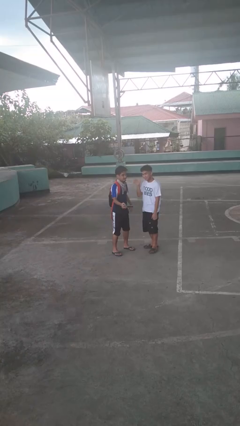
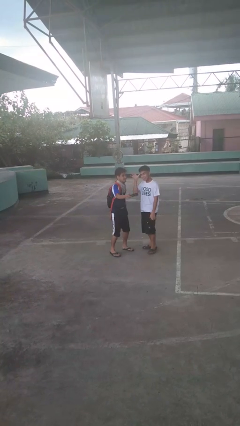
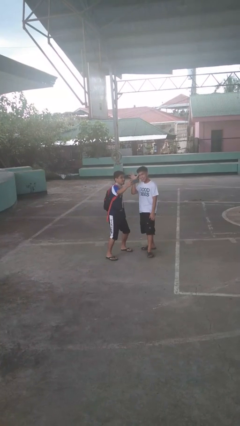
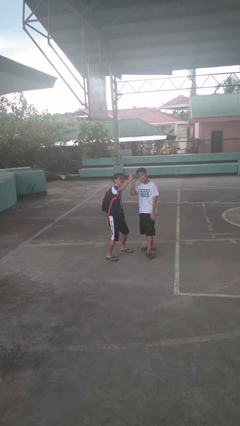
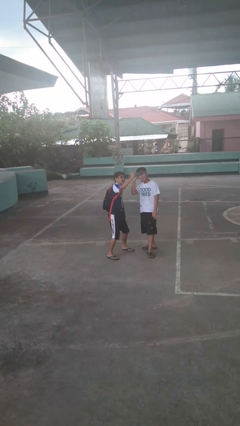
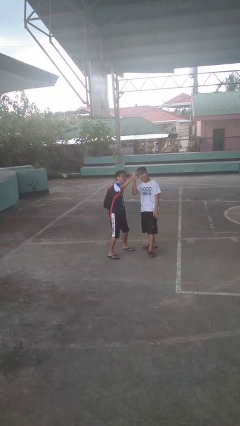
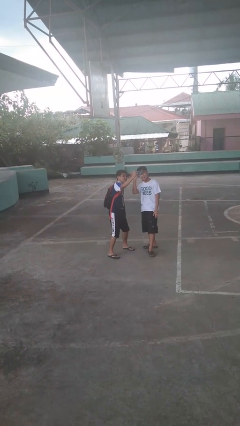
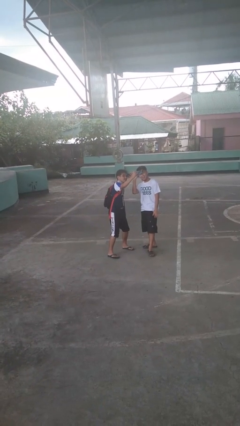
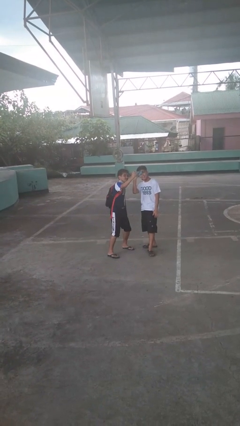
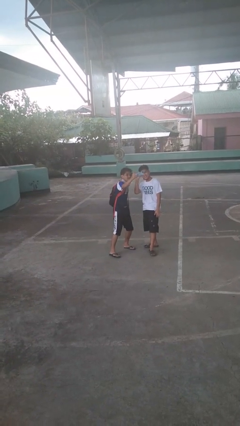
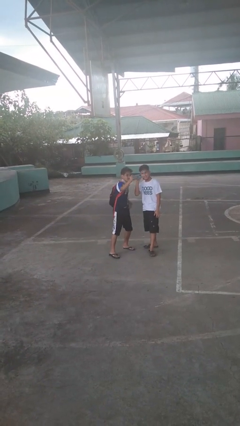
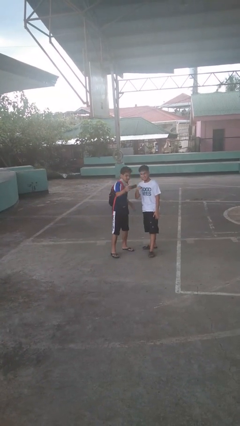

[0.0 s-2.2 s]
person takes selfie with person

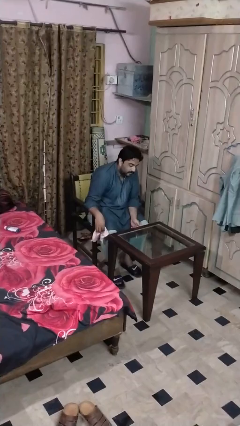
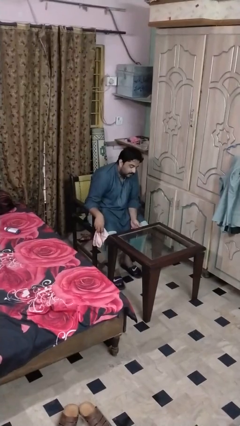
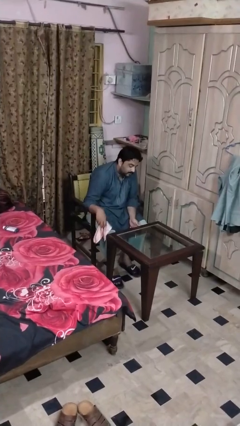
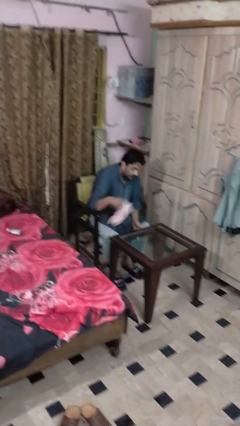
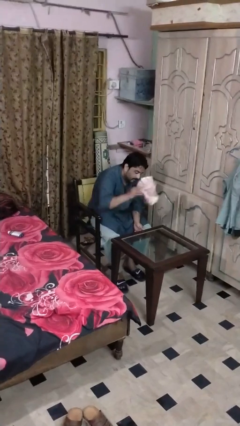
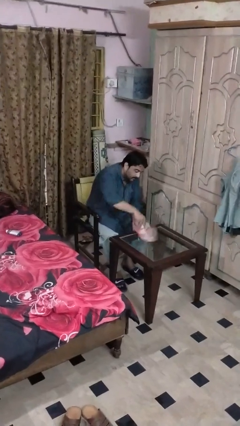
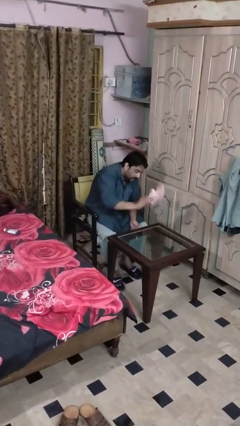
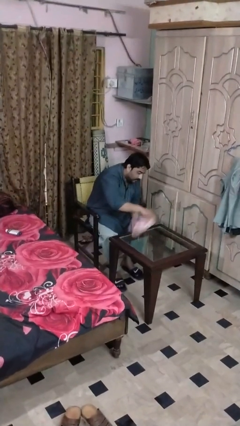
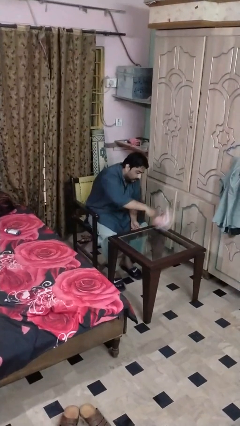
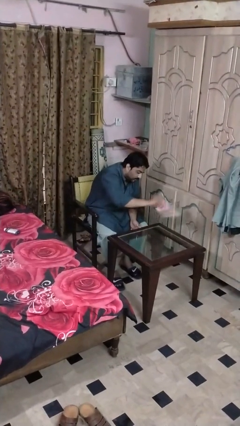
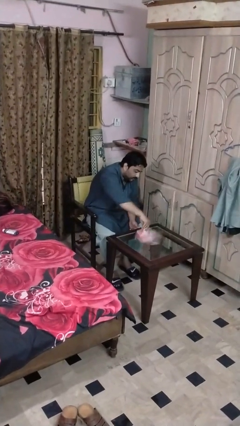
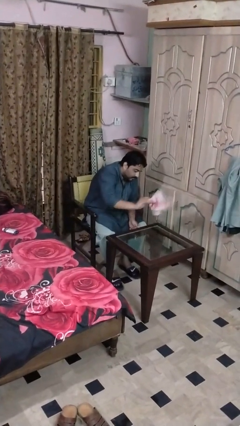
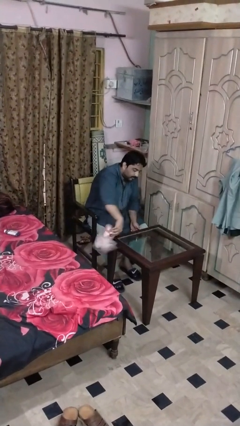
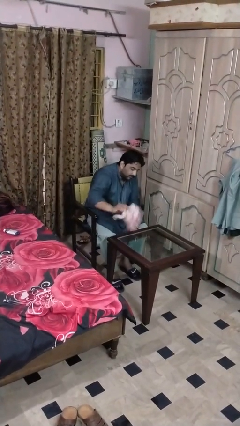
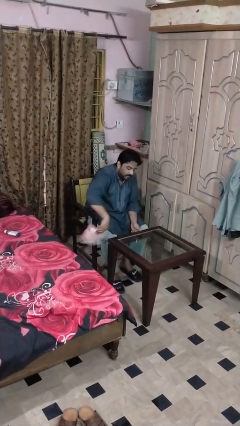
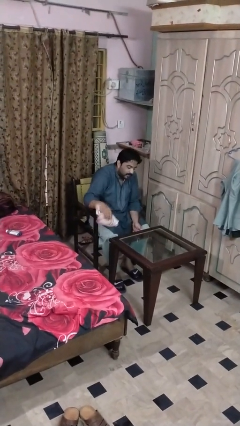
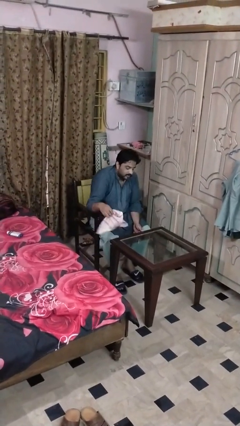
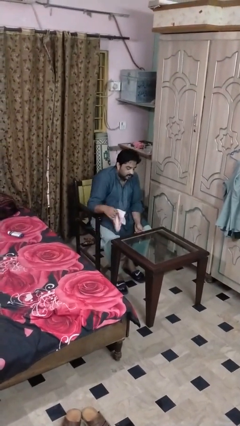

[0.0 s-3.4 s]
person cleans table with rag

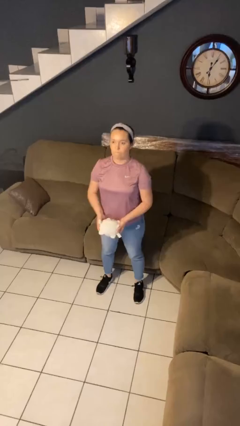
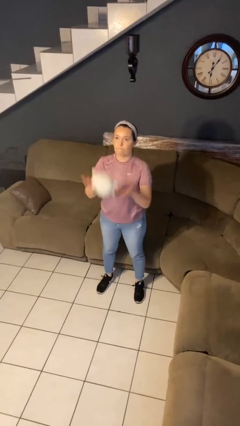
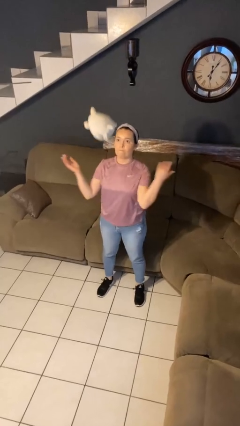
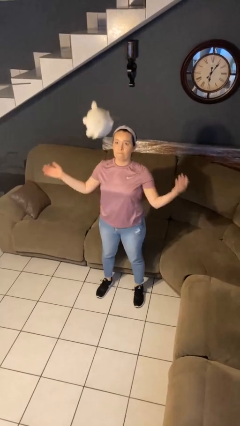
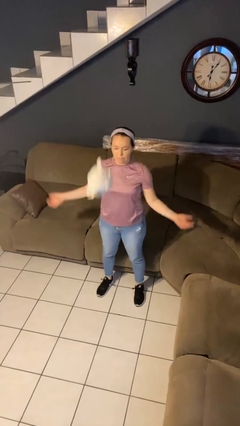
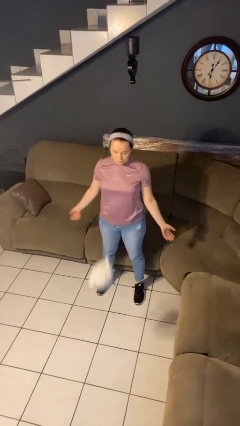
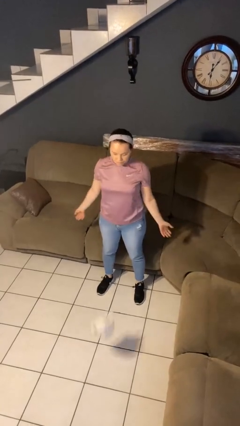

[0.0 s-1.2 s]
person throws object into air

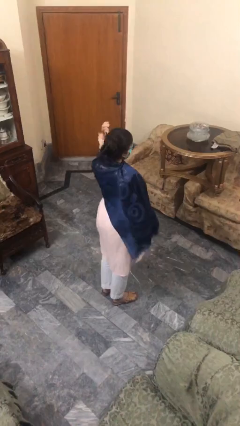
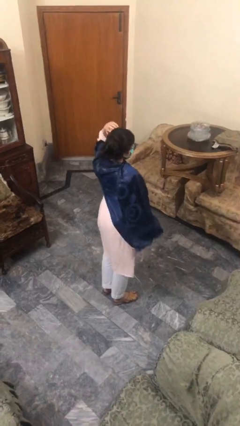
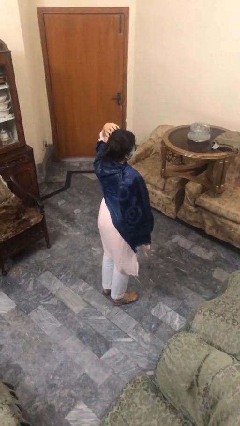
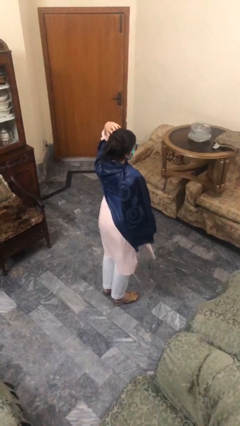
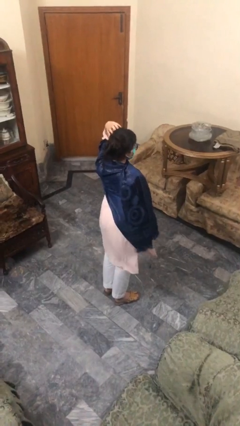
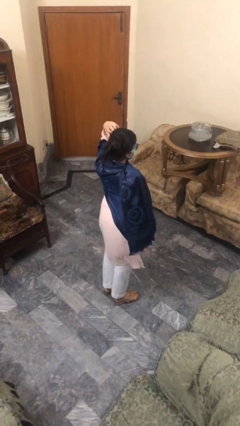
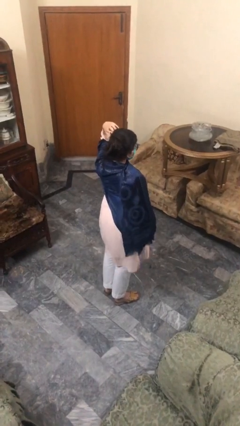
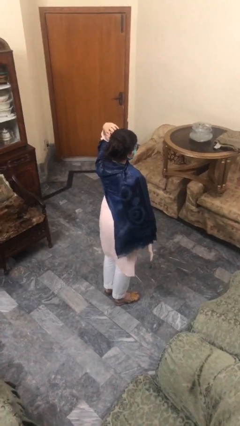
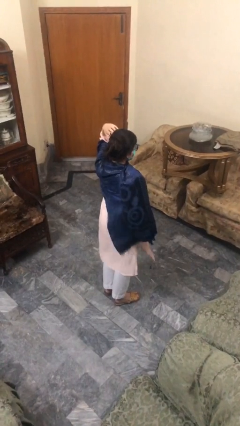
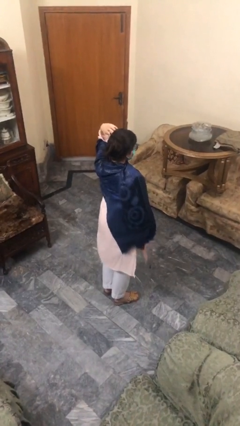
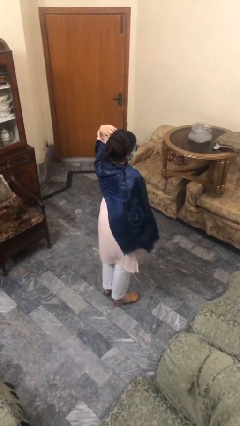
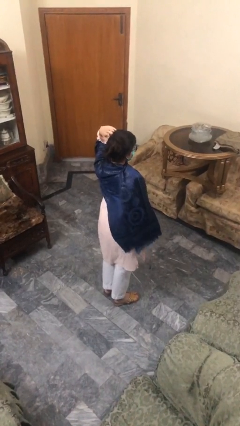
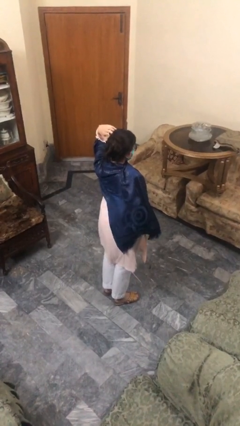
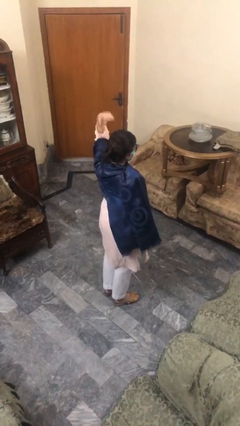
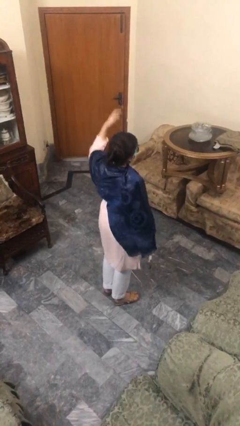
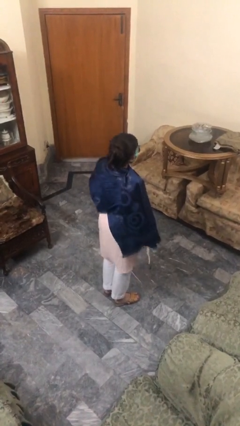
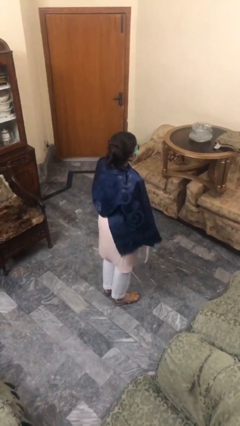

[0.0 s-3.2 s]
person scratches face

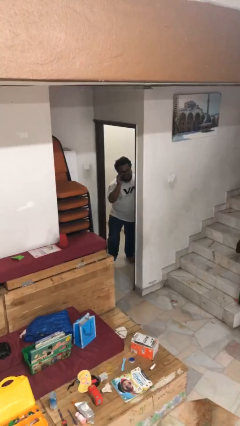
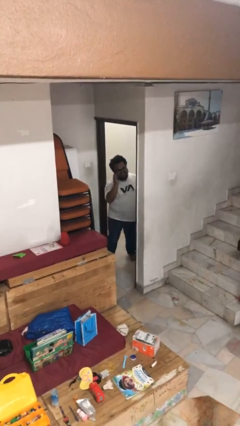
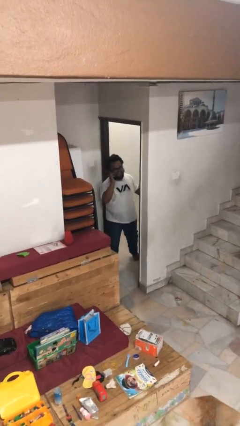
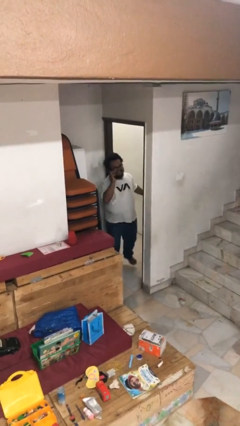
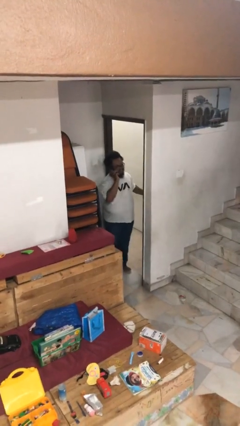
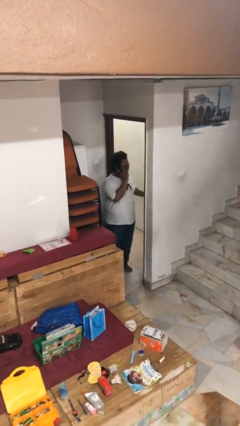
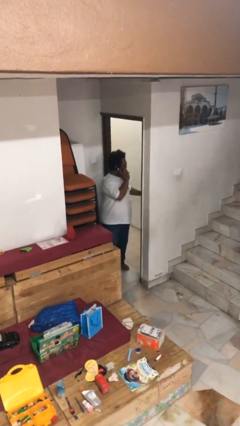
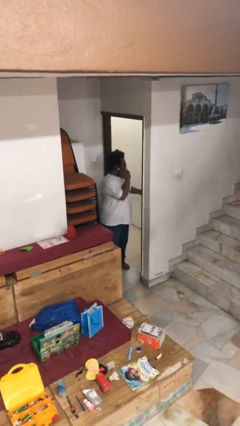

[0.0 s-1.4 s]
person enters scene through structure

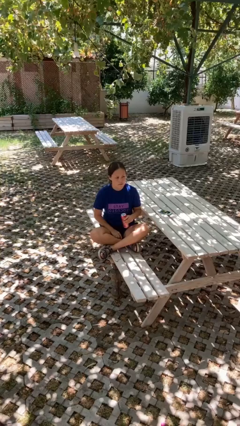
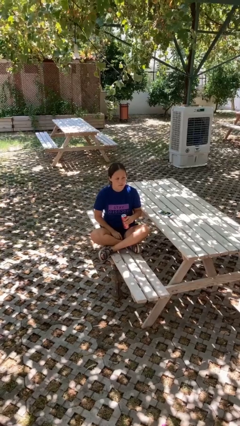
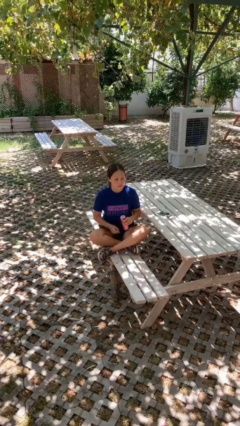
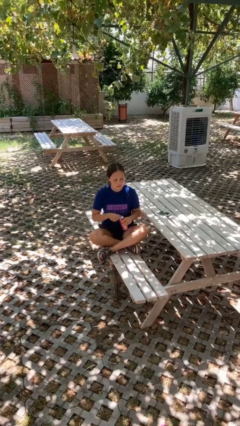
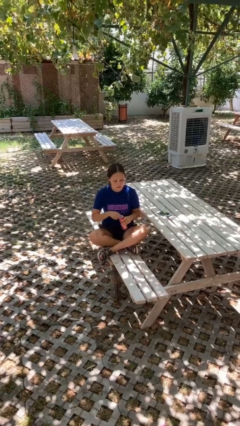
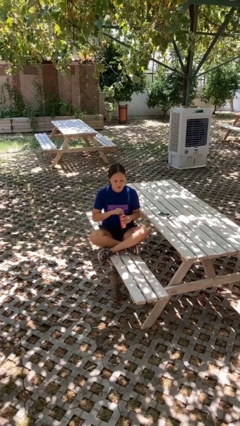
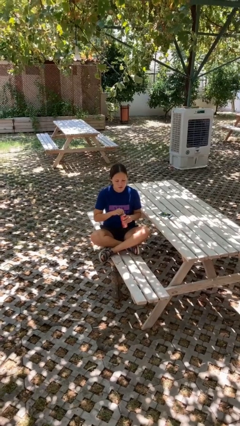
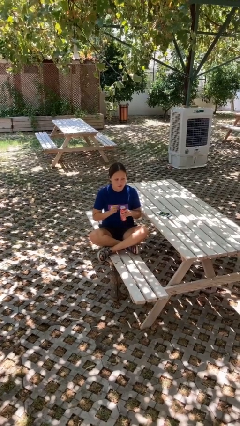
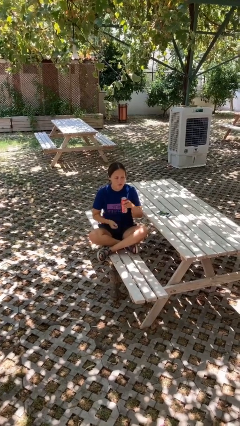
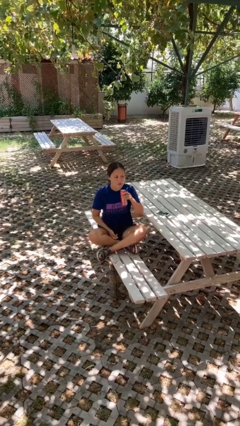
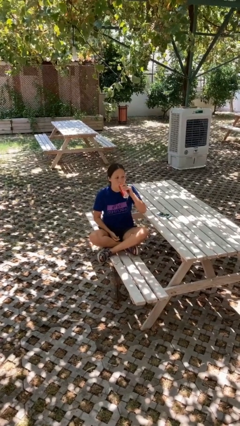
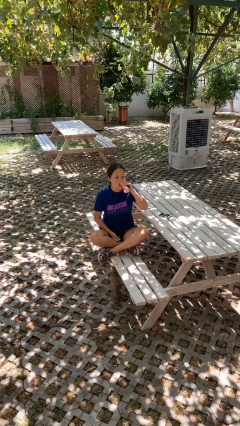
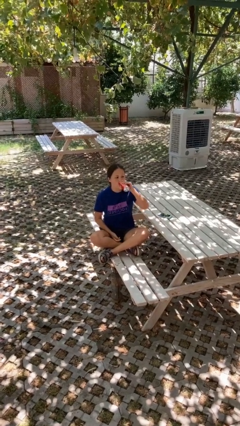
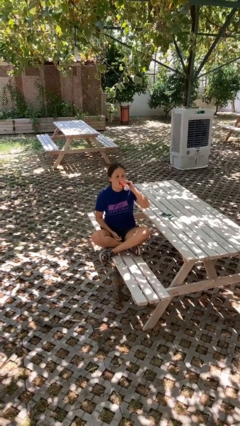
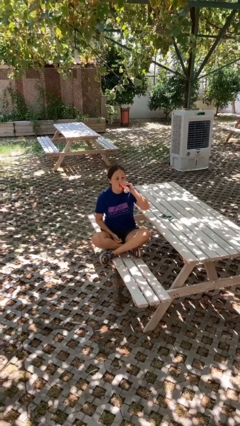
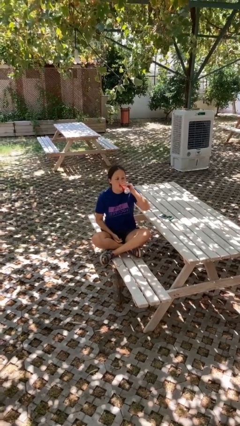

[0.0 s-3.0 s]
person opens beverage can

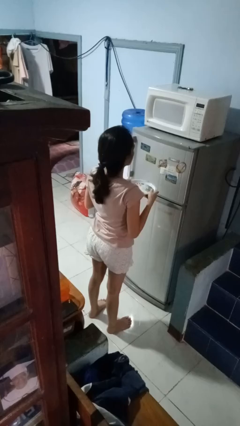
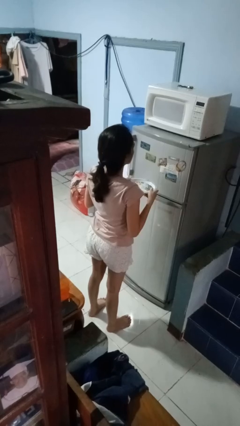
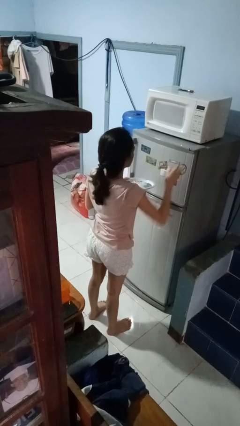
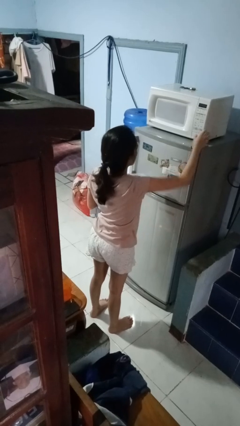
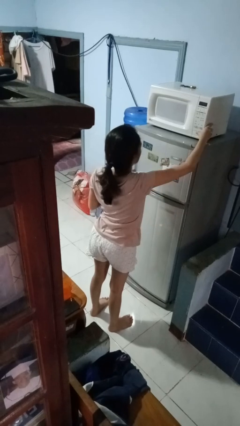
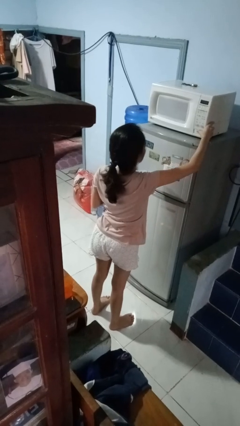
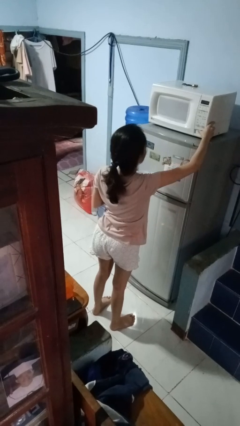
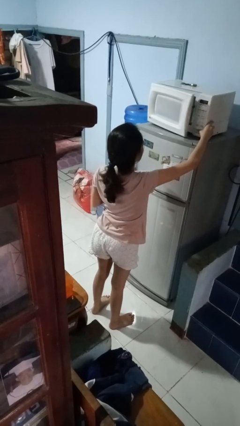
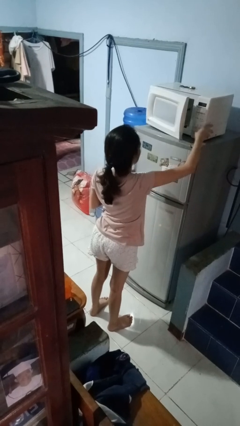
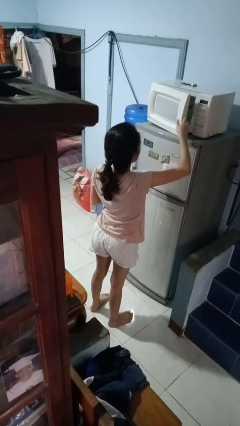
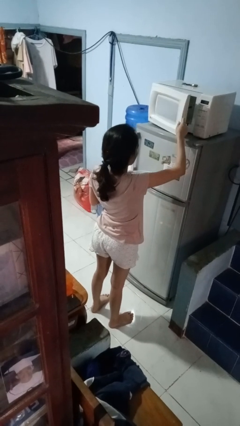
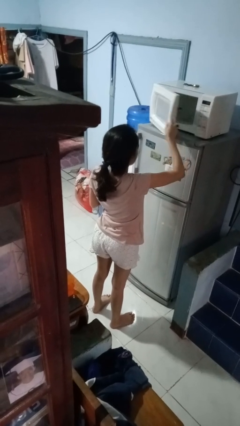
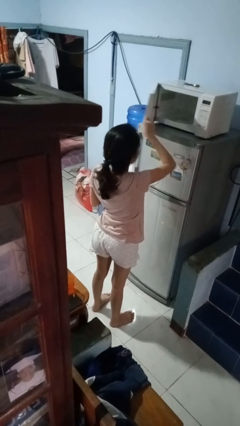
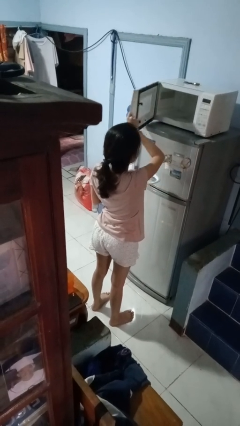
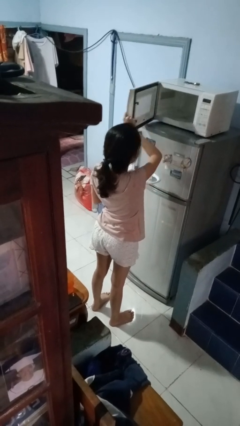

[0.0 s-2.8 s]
person opens microwave
